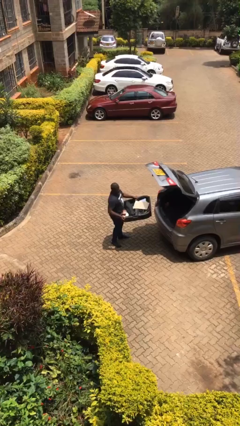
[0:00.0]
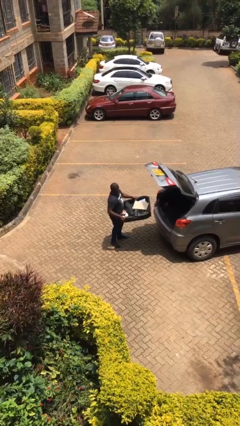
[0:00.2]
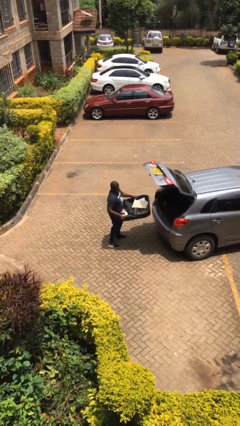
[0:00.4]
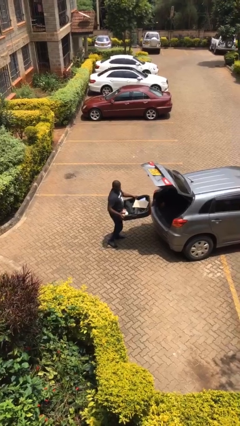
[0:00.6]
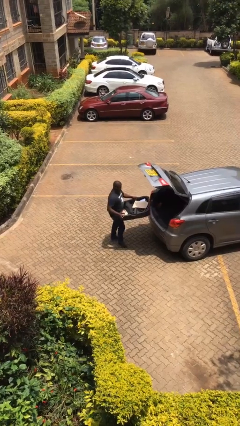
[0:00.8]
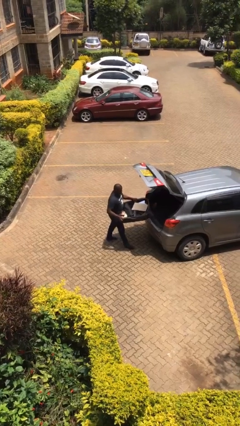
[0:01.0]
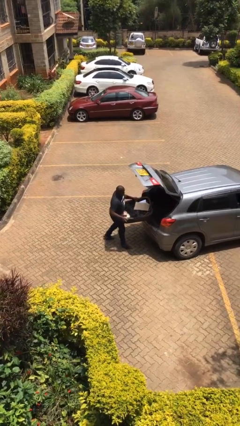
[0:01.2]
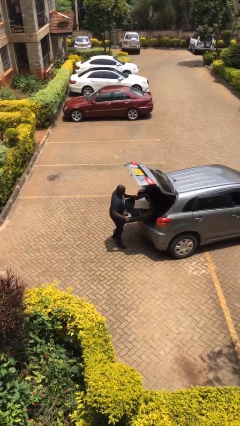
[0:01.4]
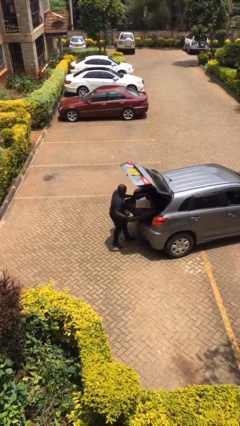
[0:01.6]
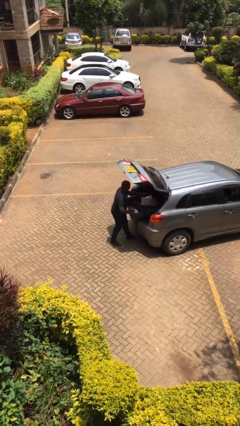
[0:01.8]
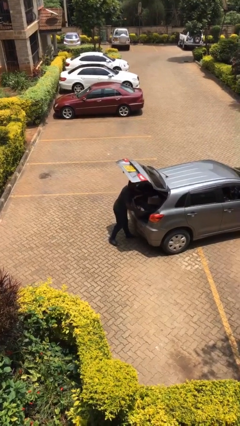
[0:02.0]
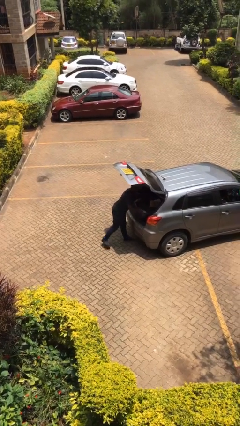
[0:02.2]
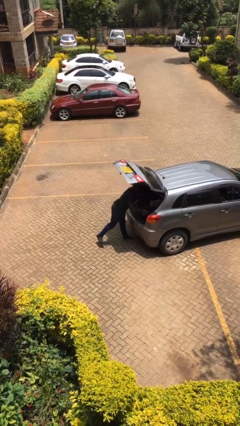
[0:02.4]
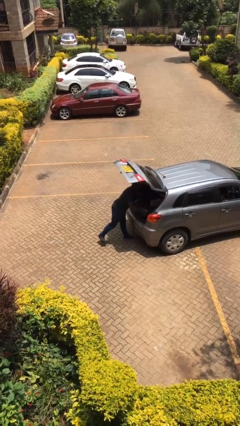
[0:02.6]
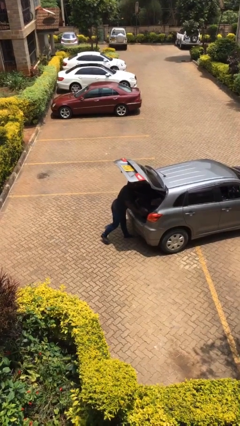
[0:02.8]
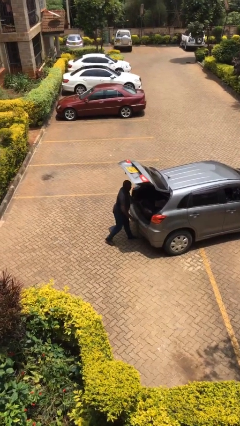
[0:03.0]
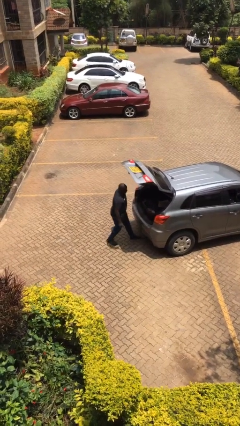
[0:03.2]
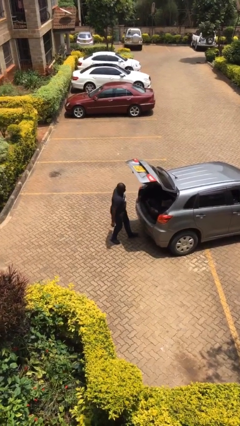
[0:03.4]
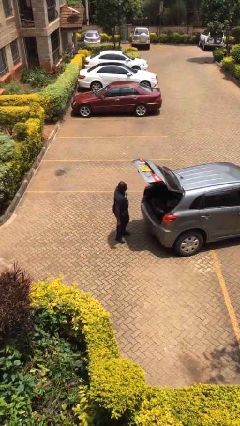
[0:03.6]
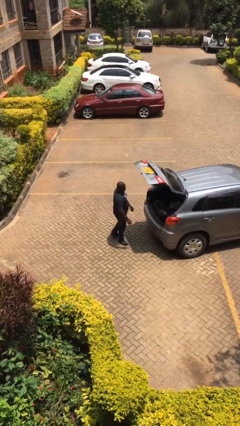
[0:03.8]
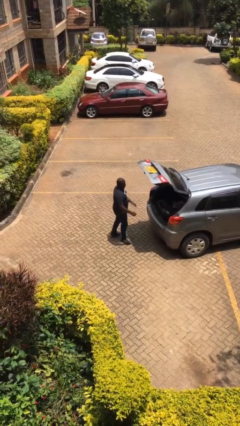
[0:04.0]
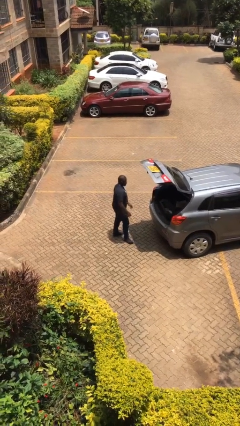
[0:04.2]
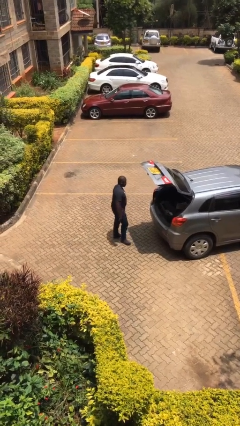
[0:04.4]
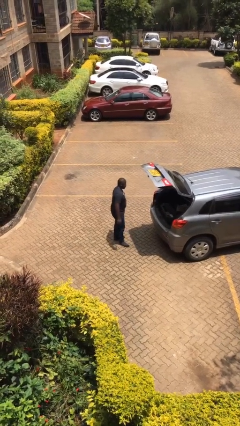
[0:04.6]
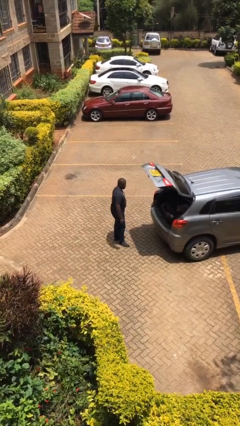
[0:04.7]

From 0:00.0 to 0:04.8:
person loads car

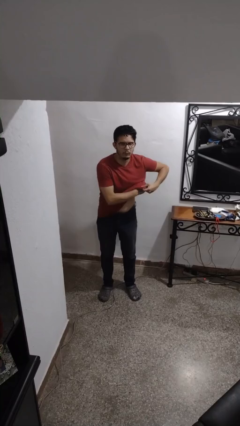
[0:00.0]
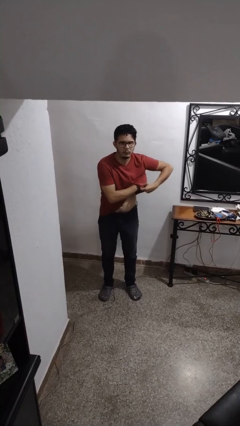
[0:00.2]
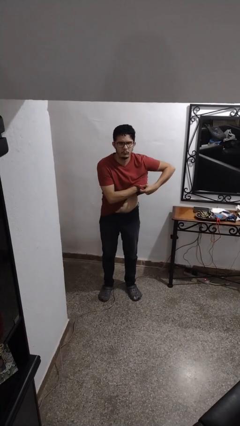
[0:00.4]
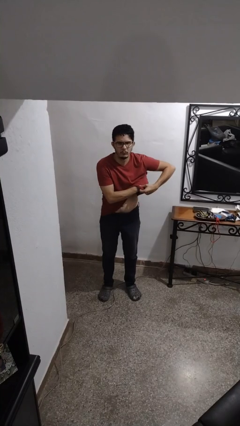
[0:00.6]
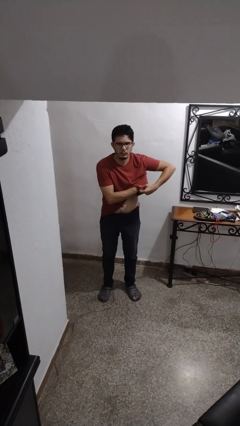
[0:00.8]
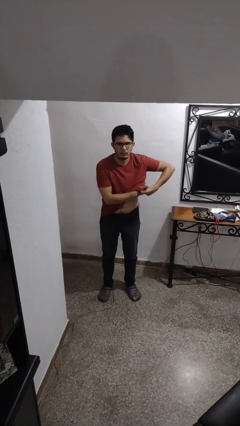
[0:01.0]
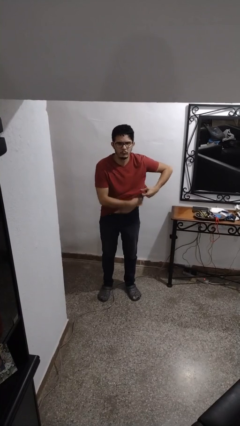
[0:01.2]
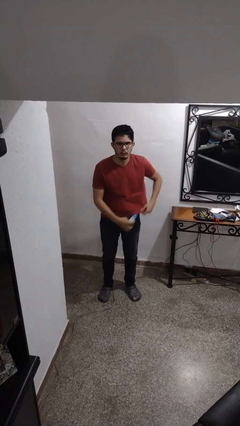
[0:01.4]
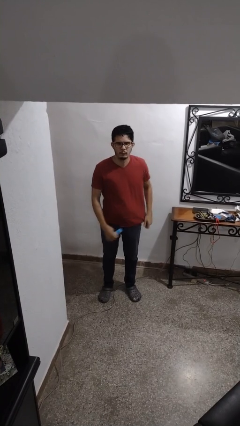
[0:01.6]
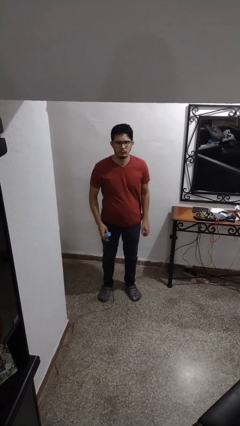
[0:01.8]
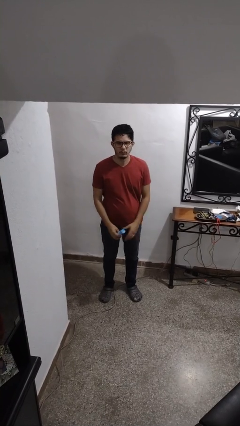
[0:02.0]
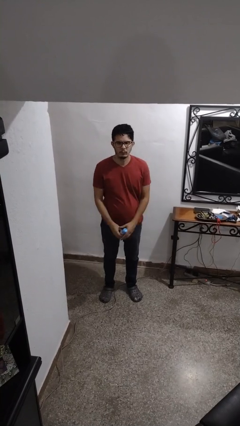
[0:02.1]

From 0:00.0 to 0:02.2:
person applies deodorant

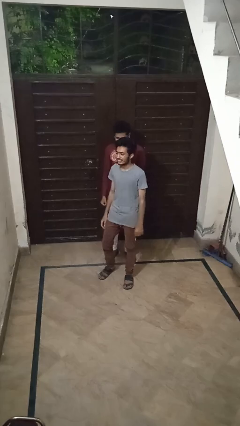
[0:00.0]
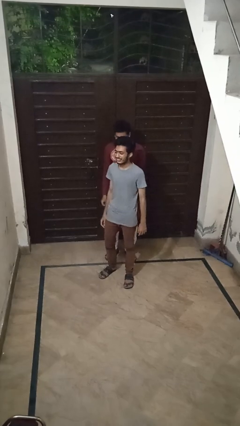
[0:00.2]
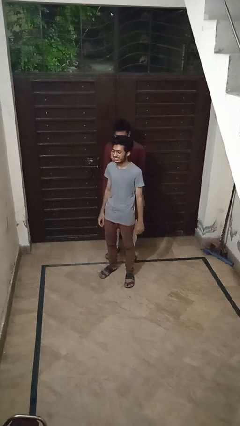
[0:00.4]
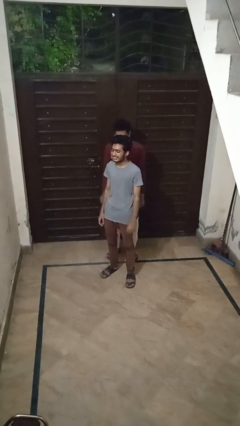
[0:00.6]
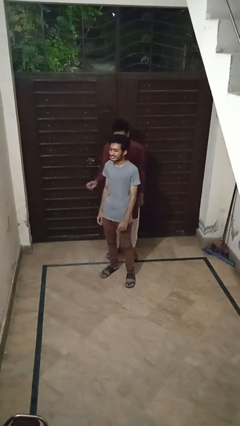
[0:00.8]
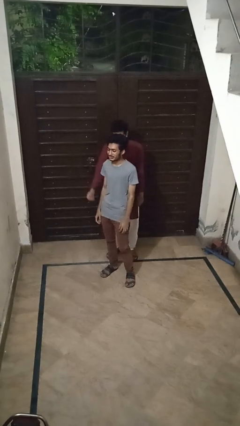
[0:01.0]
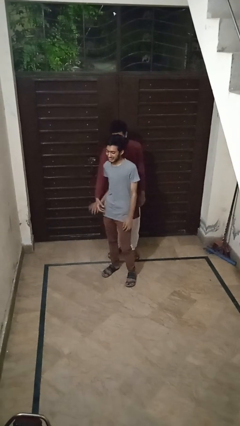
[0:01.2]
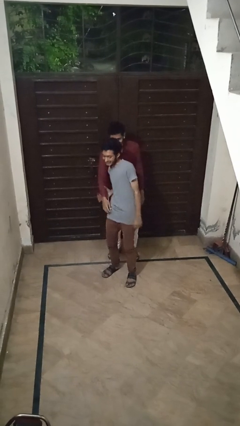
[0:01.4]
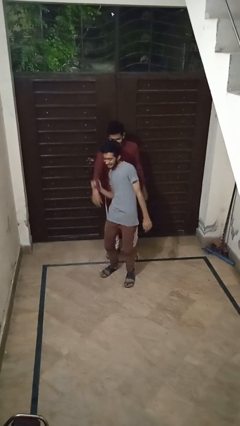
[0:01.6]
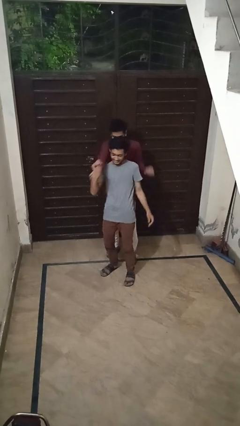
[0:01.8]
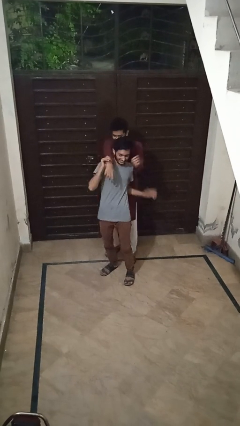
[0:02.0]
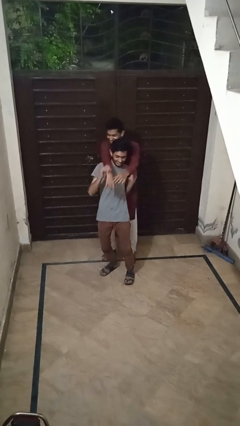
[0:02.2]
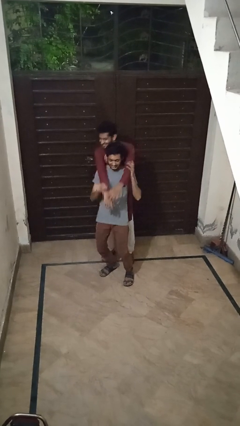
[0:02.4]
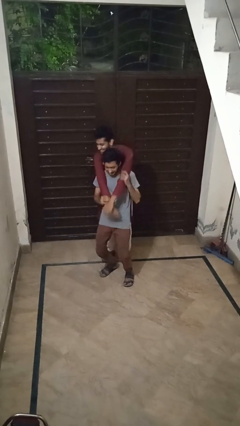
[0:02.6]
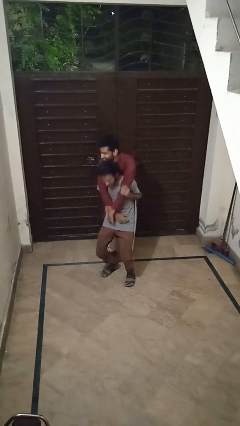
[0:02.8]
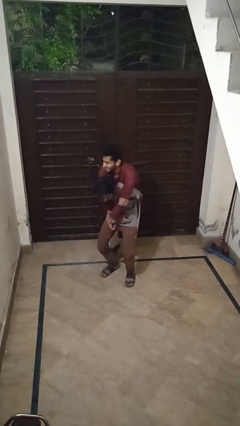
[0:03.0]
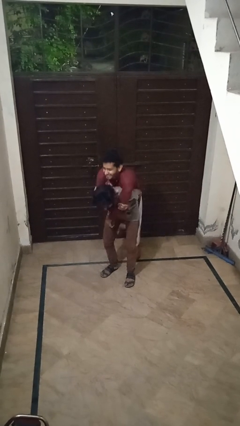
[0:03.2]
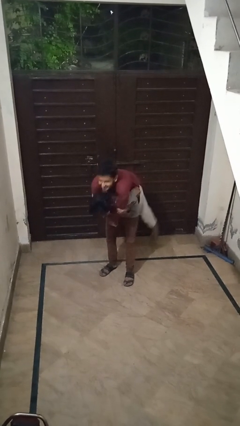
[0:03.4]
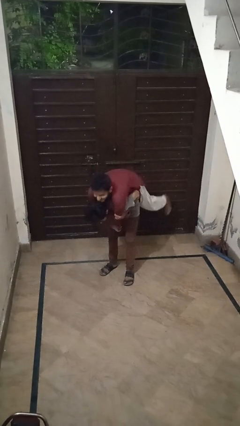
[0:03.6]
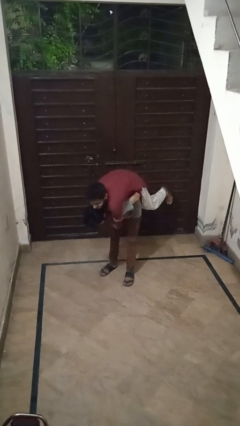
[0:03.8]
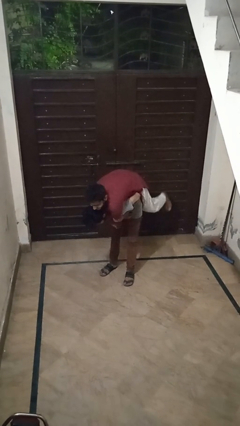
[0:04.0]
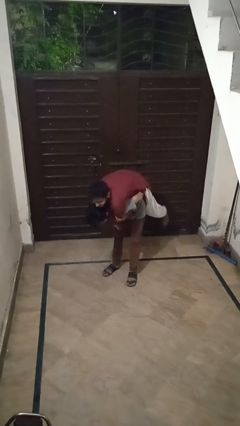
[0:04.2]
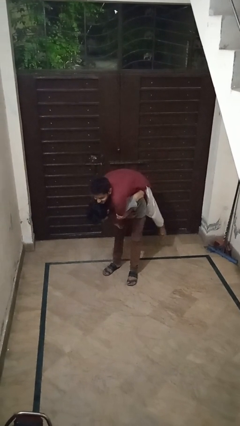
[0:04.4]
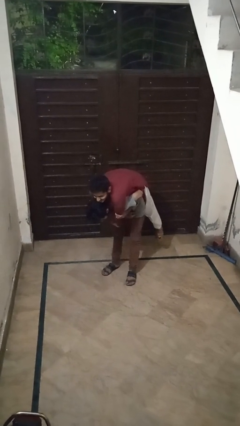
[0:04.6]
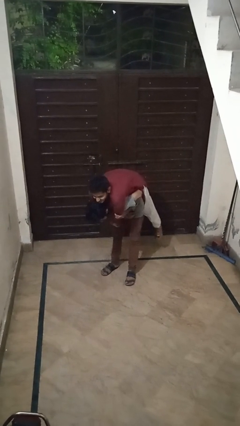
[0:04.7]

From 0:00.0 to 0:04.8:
person carries person over shoulder

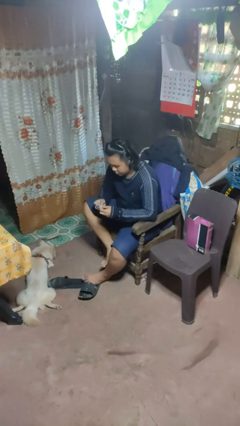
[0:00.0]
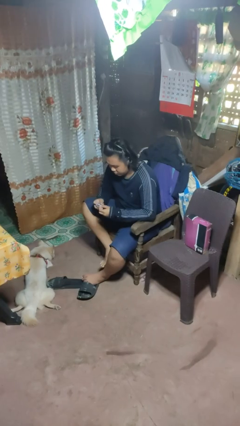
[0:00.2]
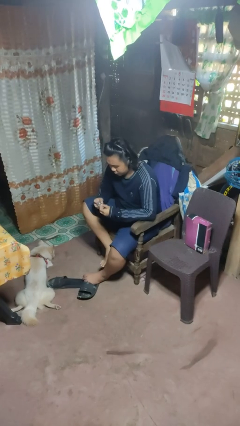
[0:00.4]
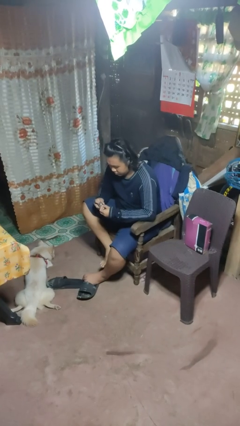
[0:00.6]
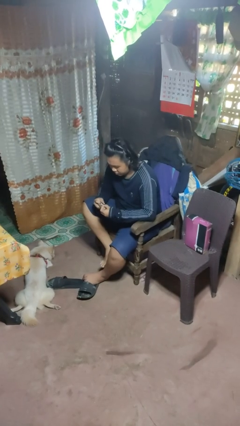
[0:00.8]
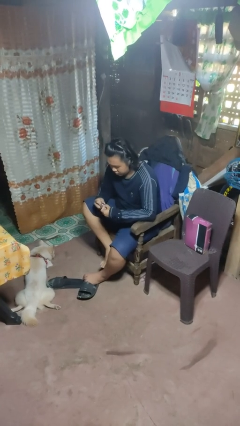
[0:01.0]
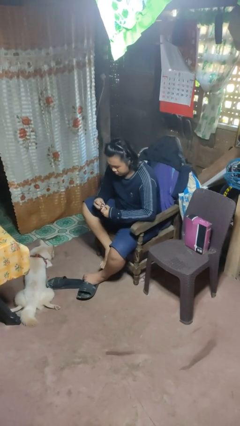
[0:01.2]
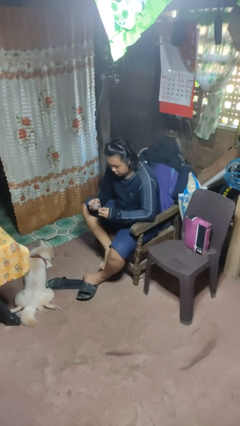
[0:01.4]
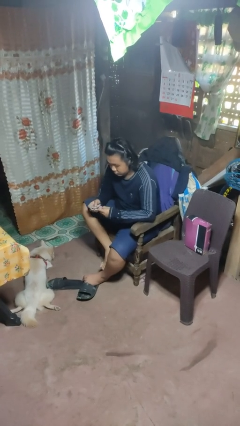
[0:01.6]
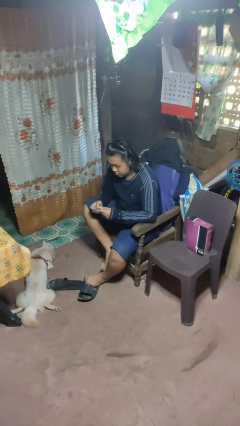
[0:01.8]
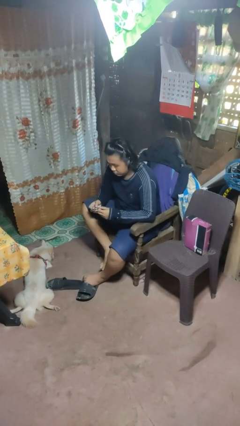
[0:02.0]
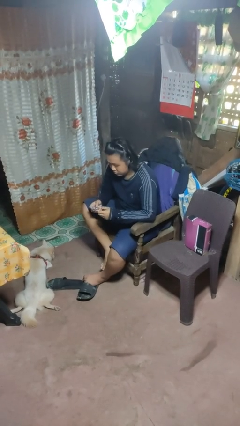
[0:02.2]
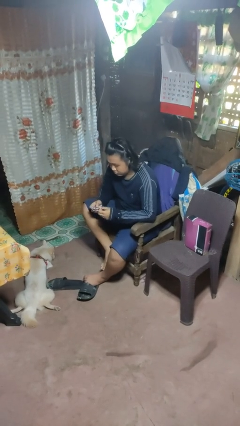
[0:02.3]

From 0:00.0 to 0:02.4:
person files fingernails

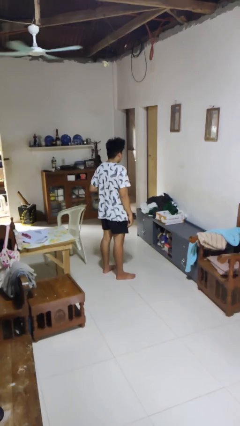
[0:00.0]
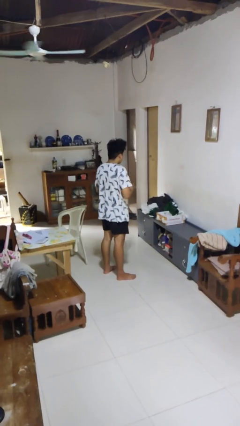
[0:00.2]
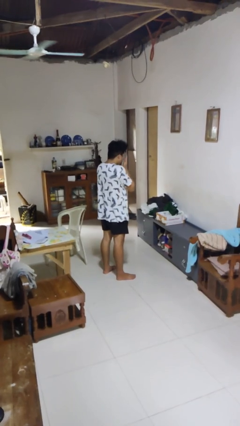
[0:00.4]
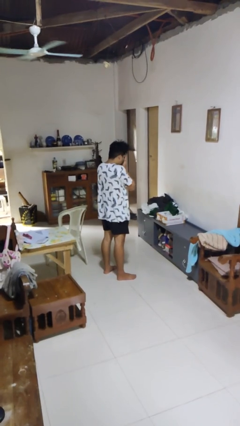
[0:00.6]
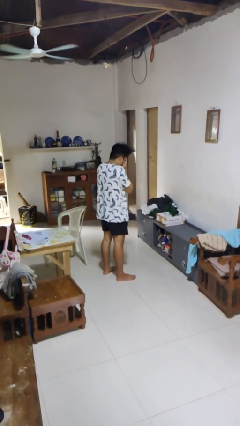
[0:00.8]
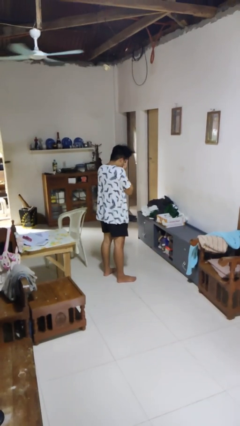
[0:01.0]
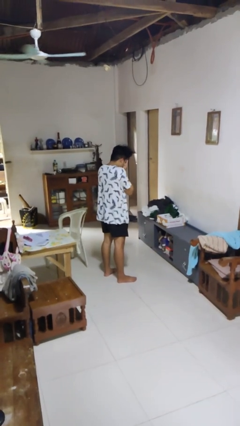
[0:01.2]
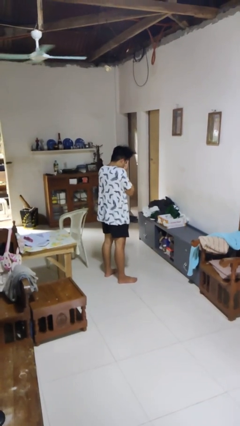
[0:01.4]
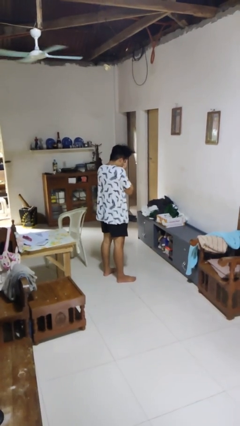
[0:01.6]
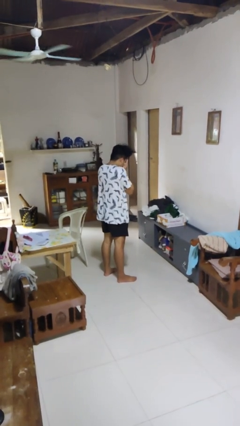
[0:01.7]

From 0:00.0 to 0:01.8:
person covers face with hands

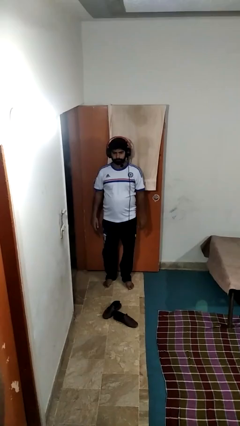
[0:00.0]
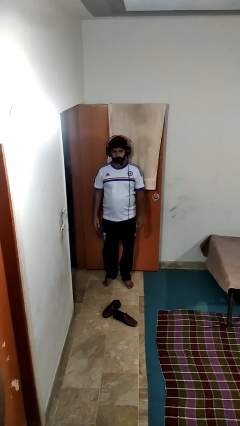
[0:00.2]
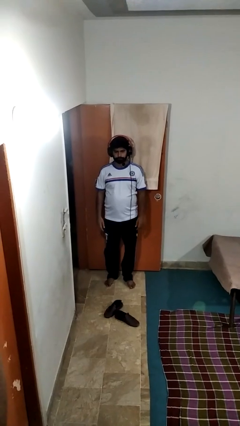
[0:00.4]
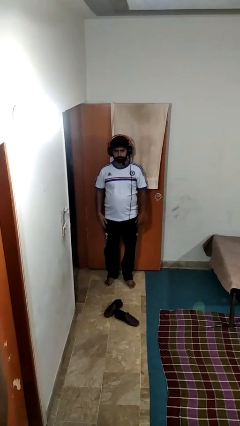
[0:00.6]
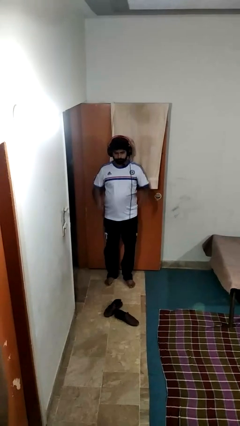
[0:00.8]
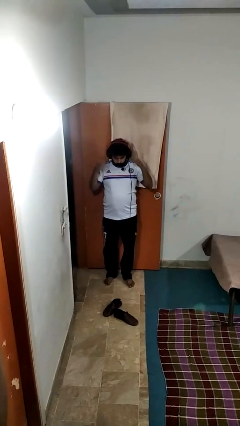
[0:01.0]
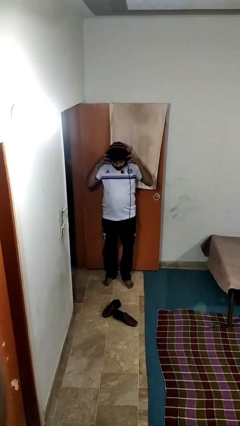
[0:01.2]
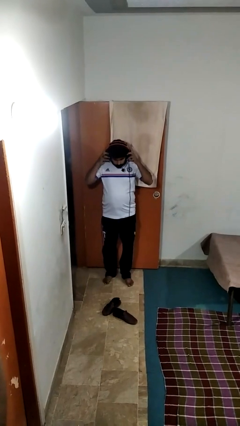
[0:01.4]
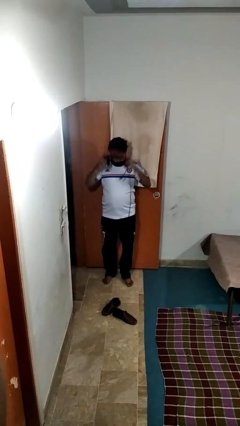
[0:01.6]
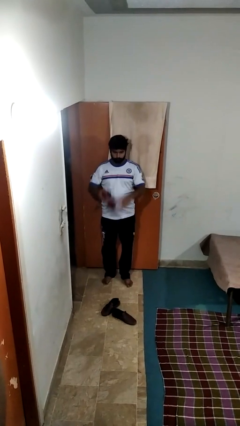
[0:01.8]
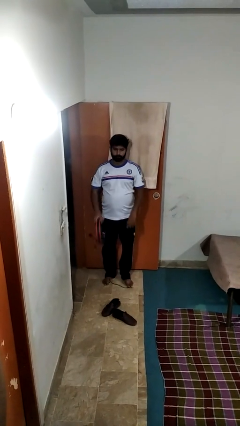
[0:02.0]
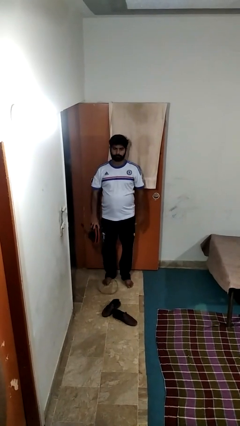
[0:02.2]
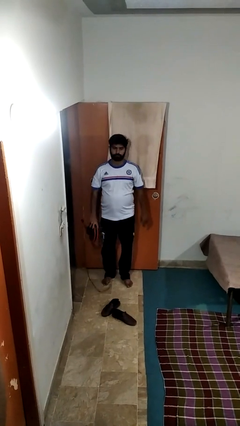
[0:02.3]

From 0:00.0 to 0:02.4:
person takes off headphones
